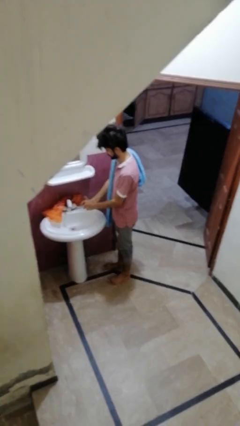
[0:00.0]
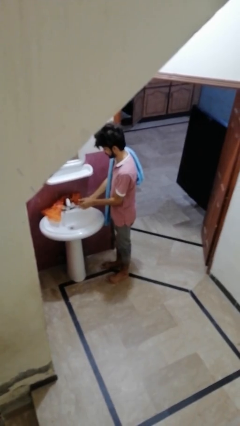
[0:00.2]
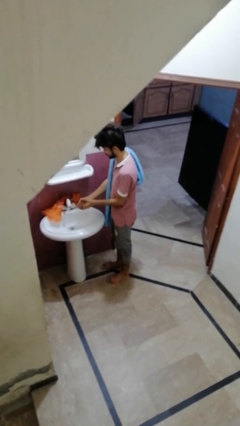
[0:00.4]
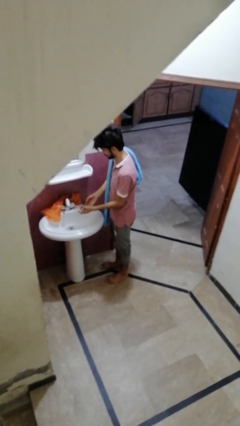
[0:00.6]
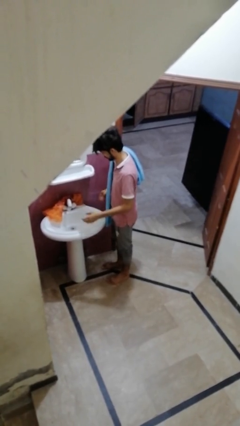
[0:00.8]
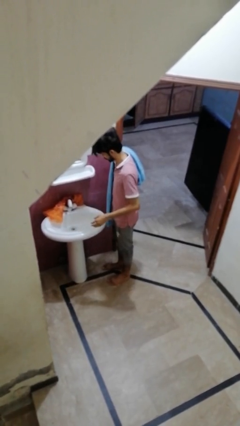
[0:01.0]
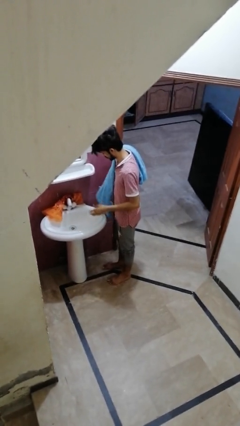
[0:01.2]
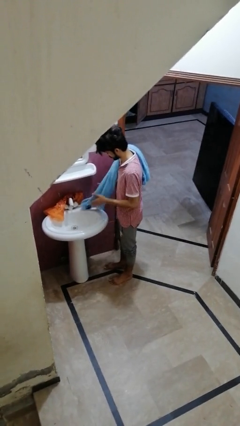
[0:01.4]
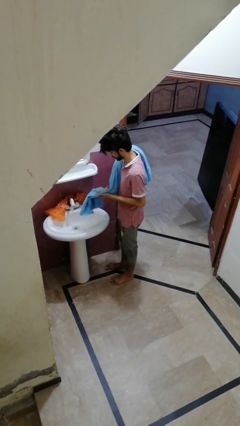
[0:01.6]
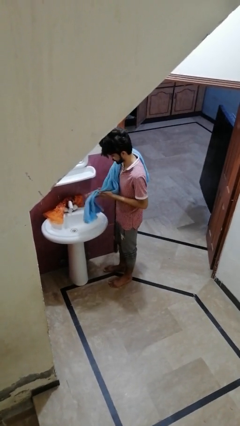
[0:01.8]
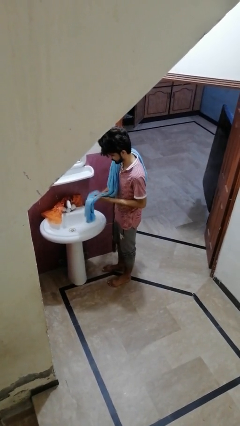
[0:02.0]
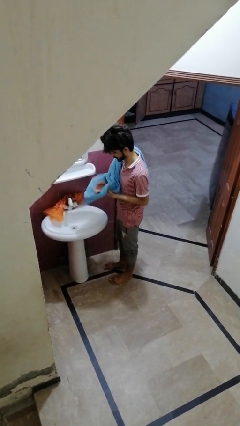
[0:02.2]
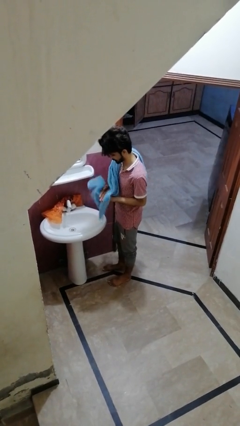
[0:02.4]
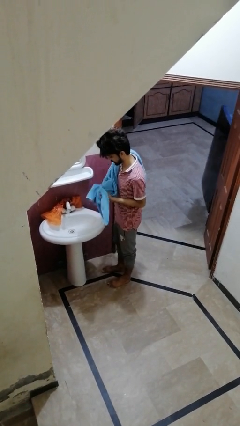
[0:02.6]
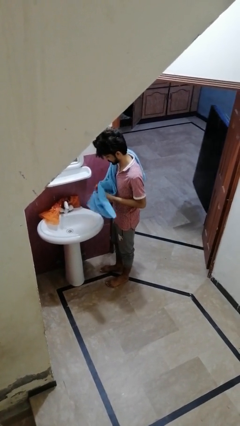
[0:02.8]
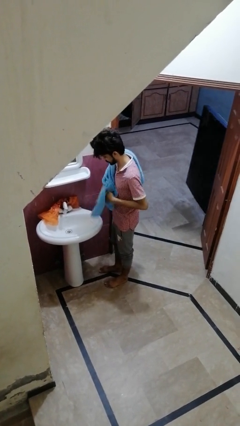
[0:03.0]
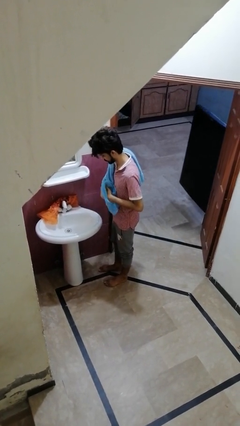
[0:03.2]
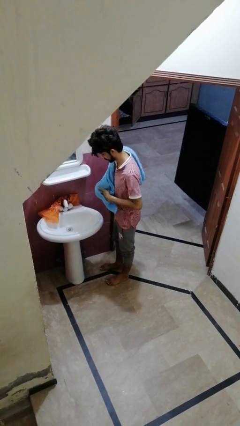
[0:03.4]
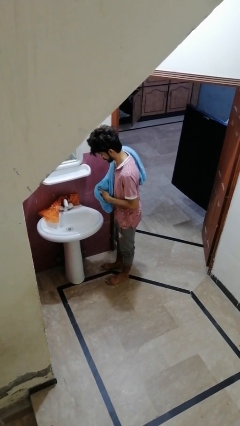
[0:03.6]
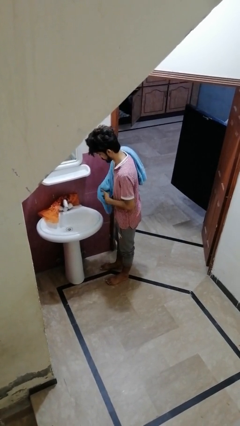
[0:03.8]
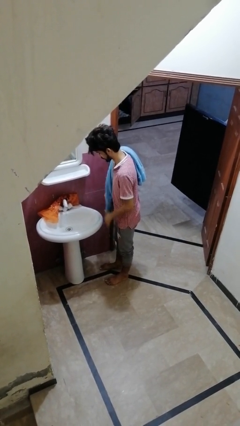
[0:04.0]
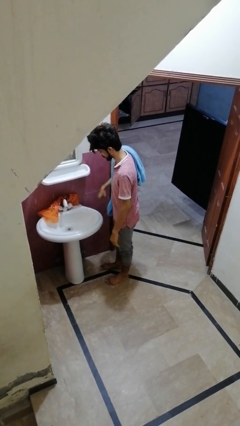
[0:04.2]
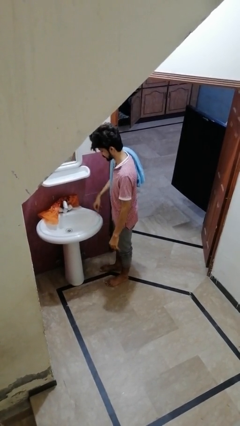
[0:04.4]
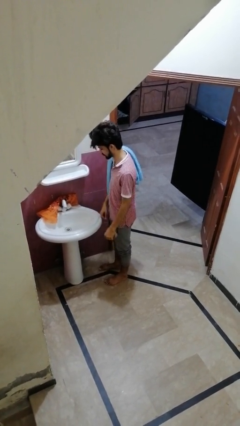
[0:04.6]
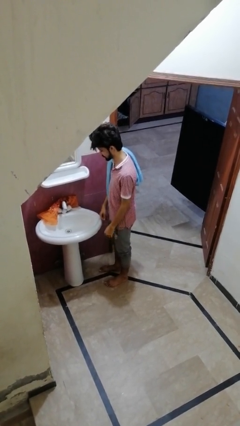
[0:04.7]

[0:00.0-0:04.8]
person dries hands with towel

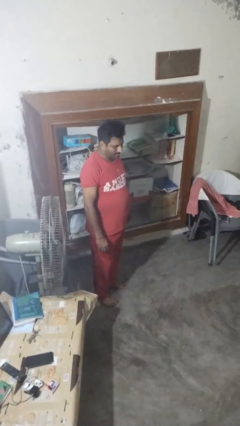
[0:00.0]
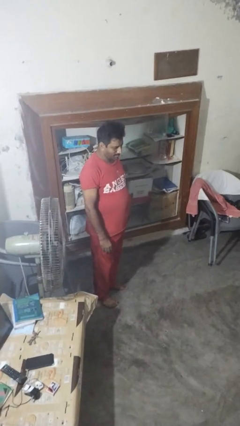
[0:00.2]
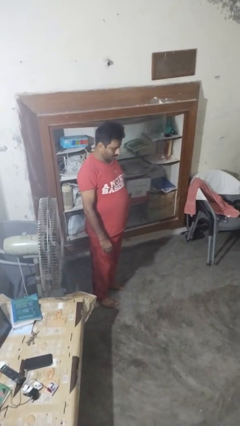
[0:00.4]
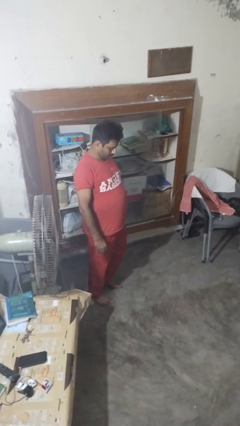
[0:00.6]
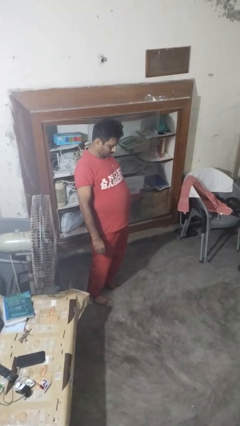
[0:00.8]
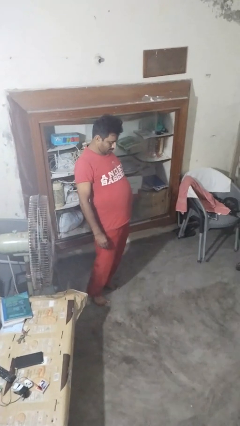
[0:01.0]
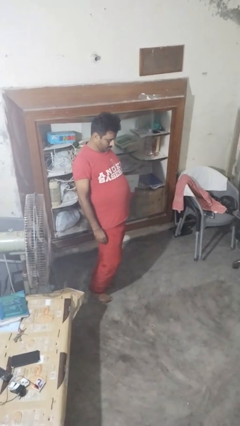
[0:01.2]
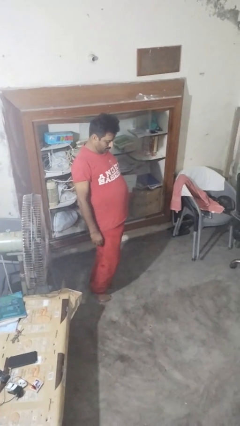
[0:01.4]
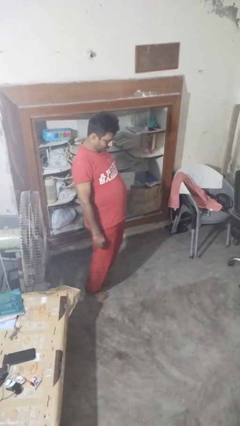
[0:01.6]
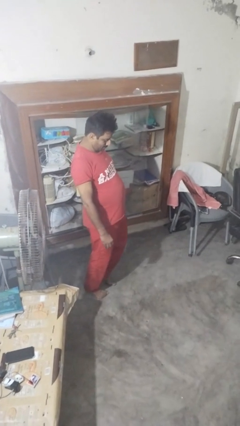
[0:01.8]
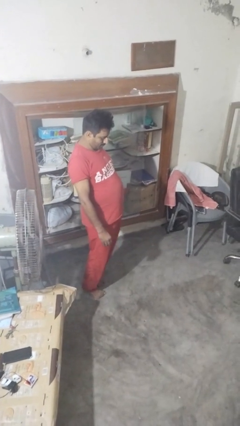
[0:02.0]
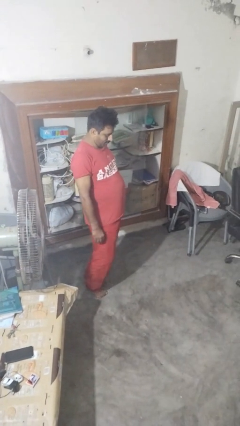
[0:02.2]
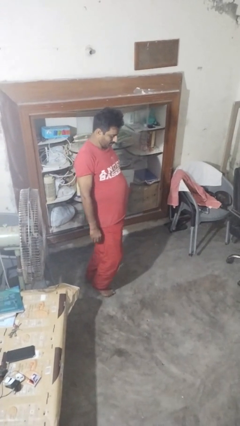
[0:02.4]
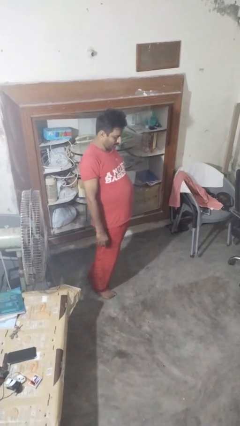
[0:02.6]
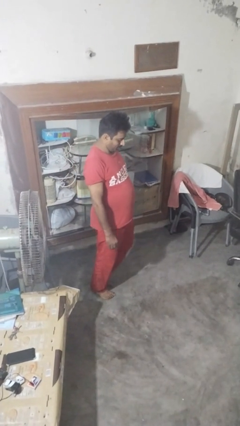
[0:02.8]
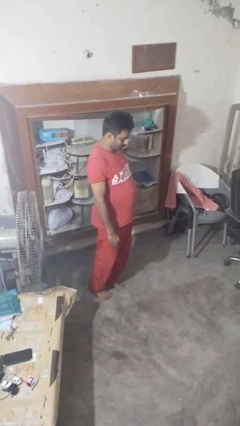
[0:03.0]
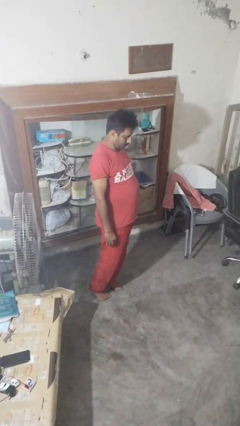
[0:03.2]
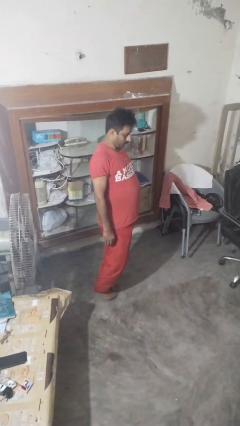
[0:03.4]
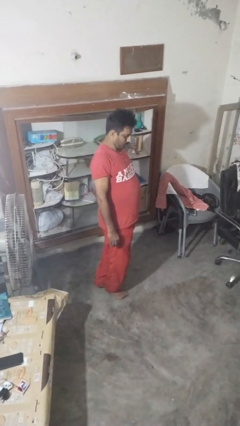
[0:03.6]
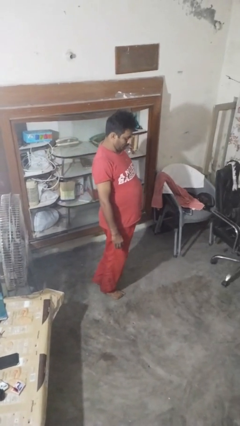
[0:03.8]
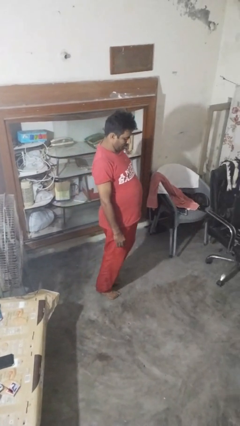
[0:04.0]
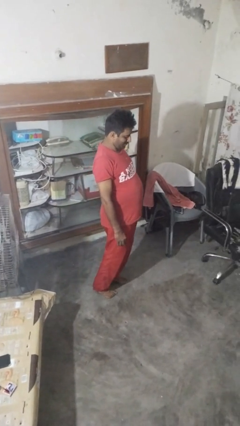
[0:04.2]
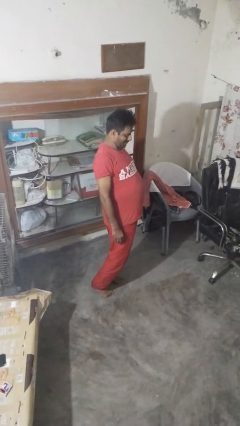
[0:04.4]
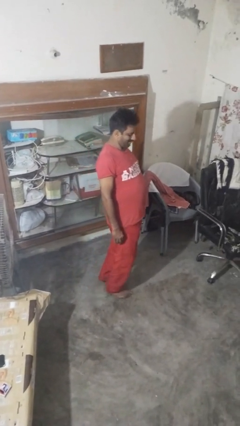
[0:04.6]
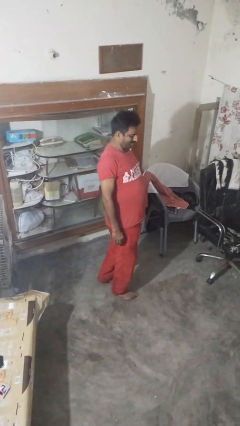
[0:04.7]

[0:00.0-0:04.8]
person walks tiptoe

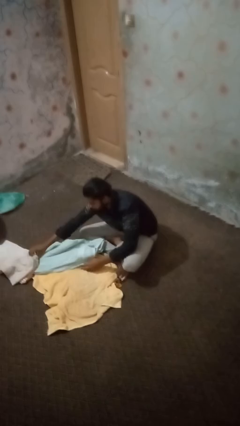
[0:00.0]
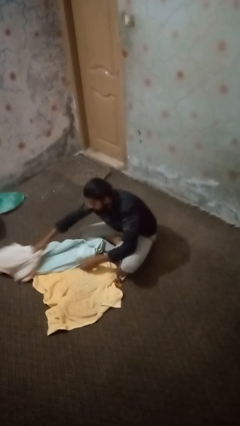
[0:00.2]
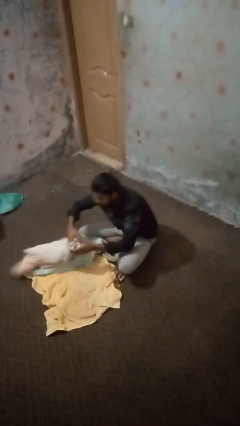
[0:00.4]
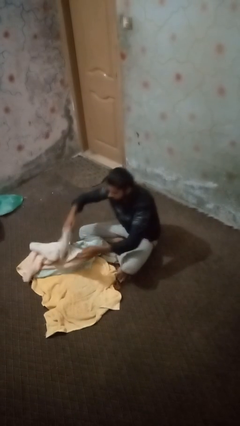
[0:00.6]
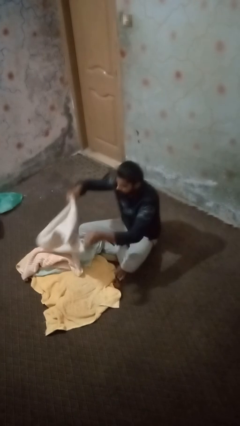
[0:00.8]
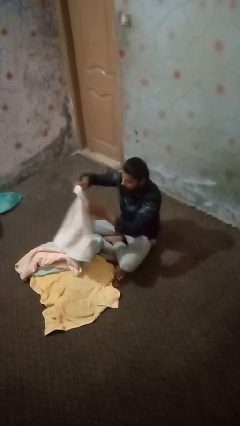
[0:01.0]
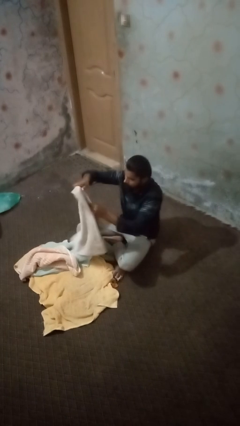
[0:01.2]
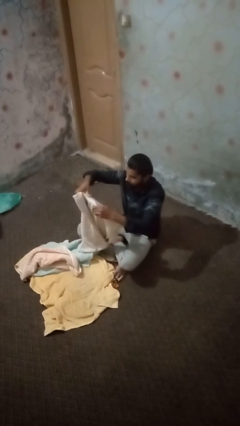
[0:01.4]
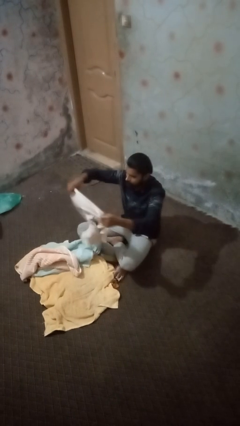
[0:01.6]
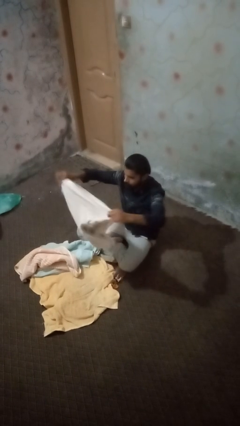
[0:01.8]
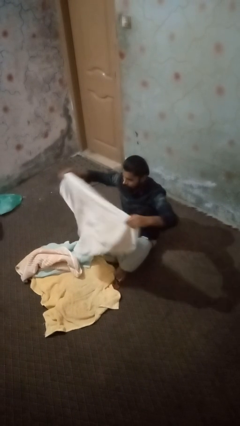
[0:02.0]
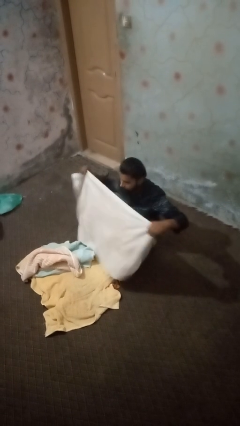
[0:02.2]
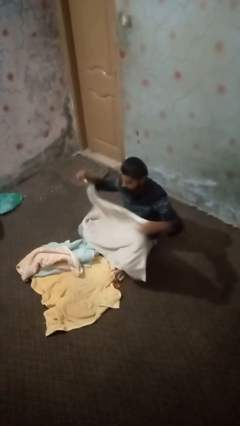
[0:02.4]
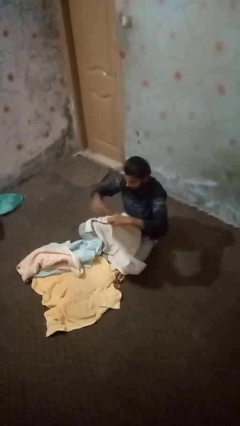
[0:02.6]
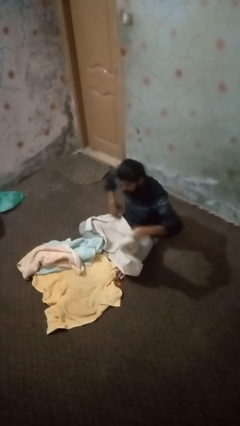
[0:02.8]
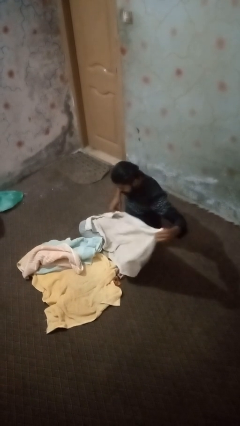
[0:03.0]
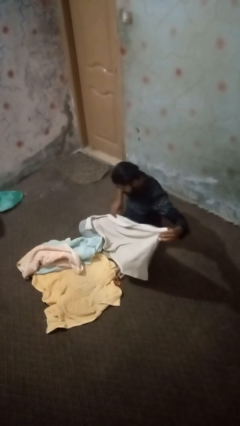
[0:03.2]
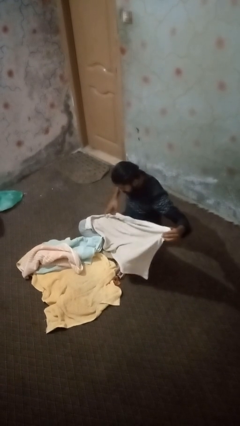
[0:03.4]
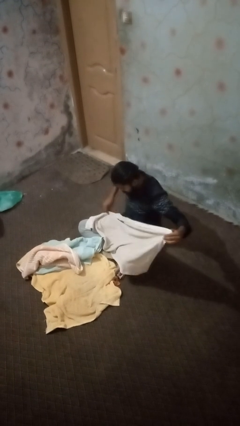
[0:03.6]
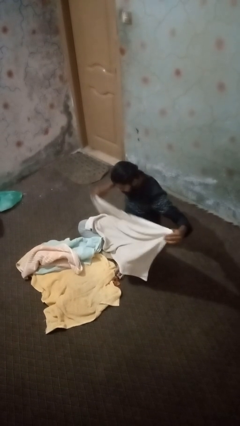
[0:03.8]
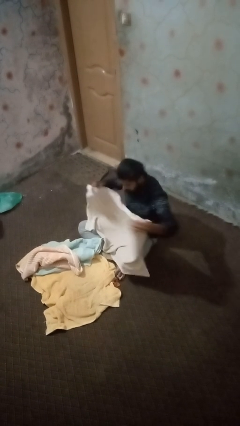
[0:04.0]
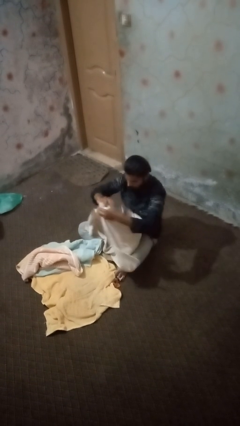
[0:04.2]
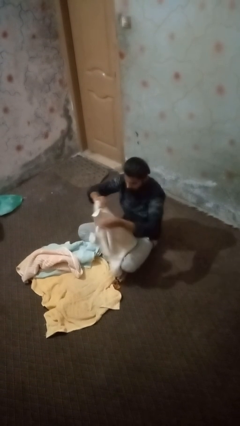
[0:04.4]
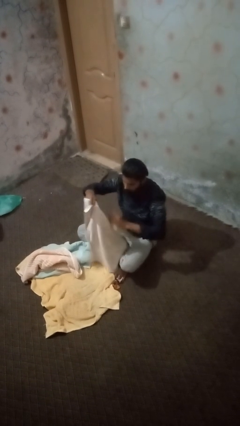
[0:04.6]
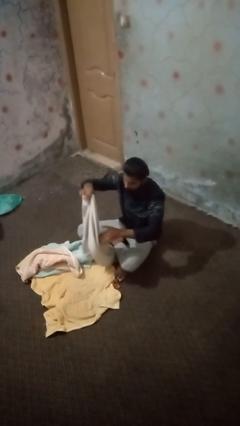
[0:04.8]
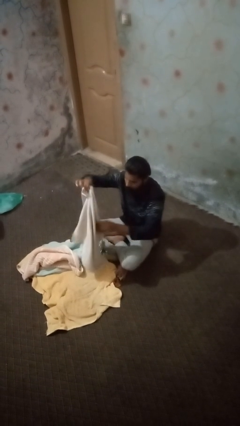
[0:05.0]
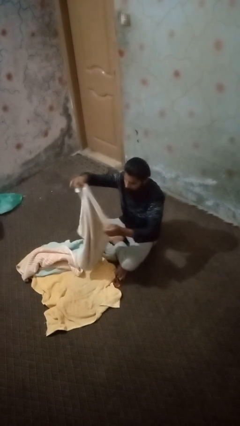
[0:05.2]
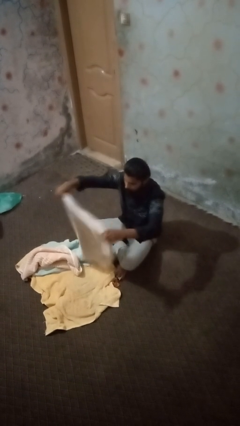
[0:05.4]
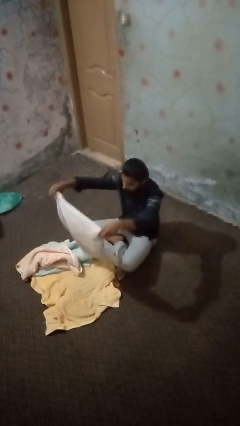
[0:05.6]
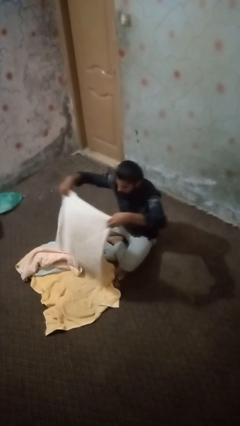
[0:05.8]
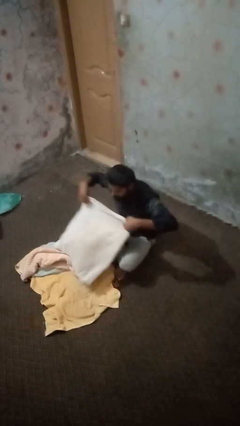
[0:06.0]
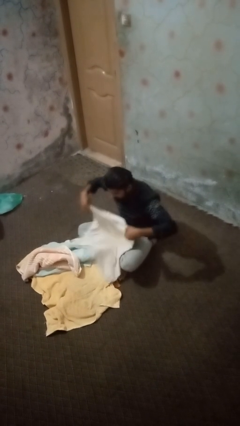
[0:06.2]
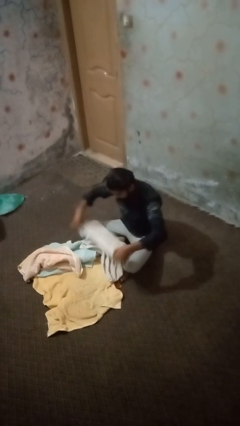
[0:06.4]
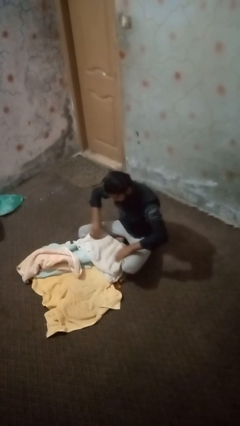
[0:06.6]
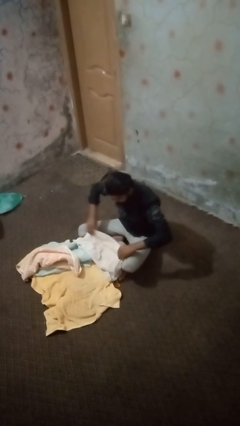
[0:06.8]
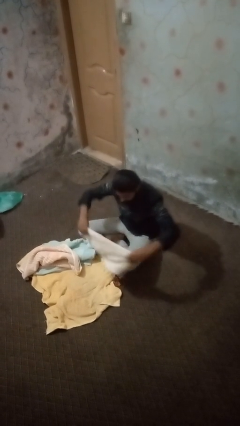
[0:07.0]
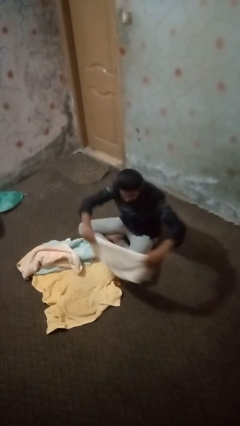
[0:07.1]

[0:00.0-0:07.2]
person folds towel

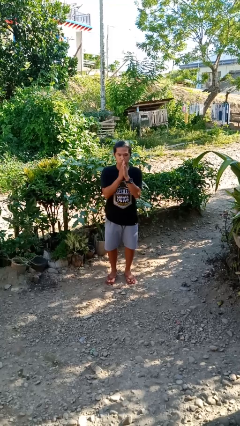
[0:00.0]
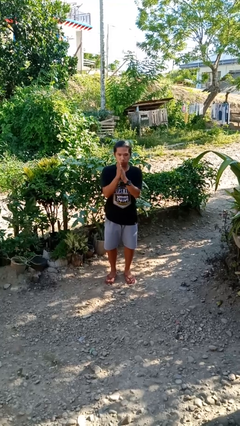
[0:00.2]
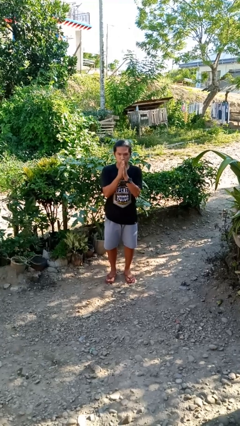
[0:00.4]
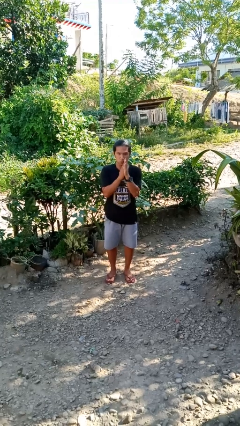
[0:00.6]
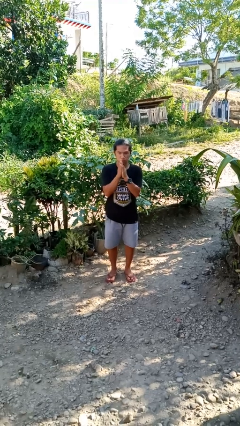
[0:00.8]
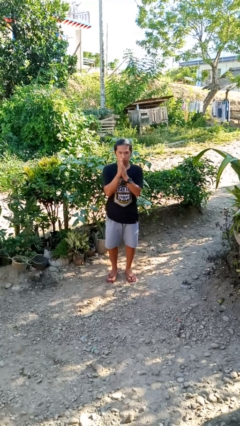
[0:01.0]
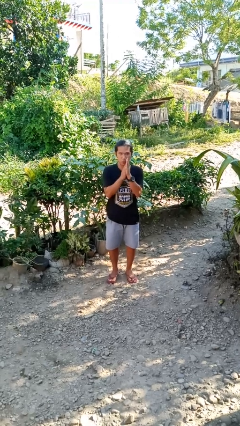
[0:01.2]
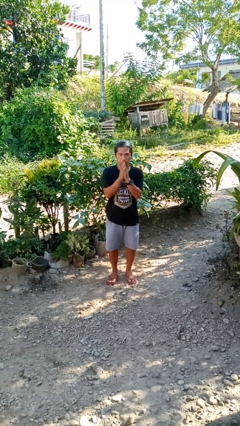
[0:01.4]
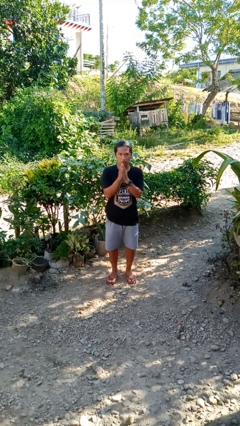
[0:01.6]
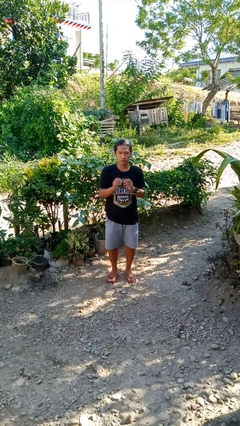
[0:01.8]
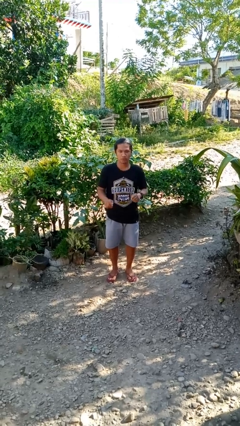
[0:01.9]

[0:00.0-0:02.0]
person blows into hands
